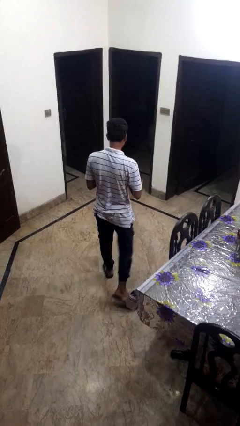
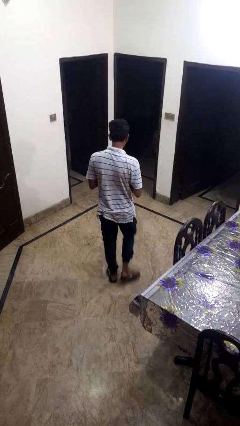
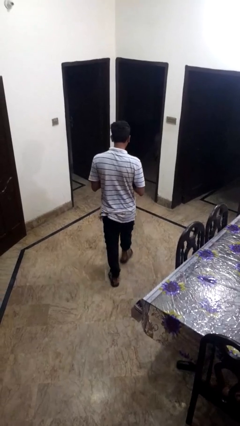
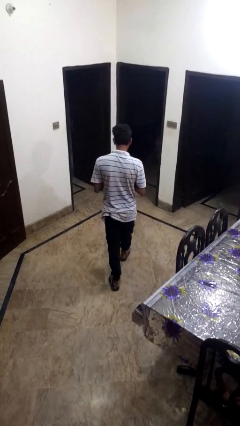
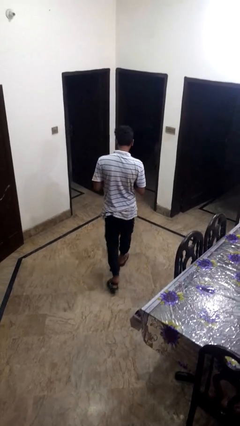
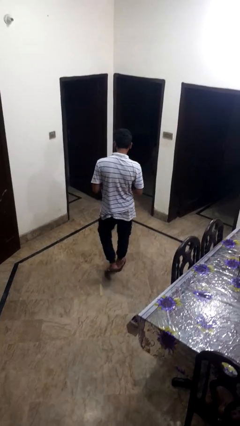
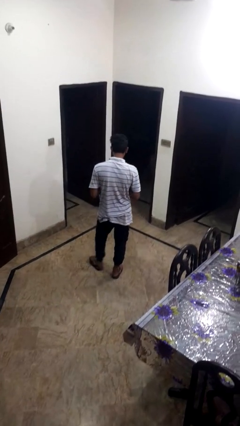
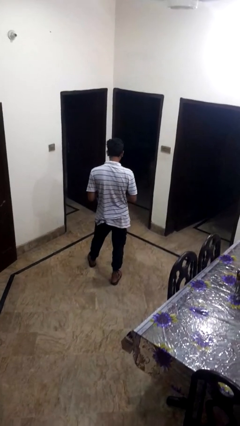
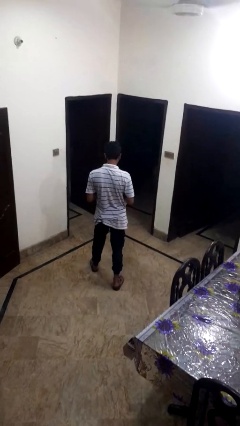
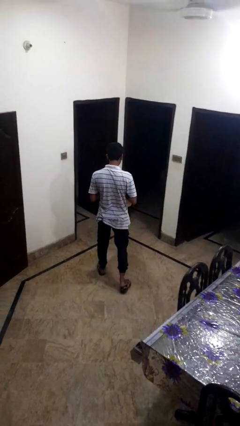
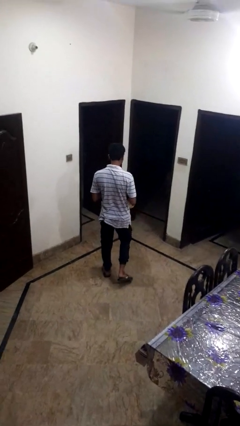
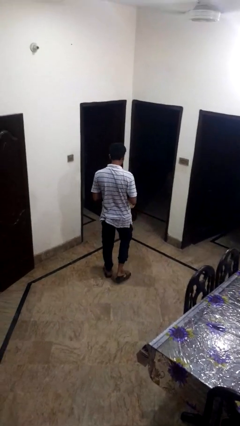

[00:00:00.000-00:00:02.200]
person carries groceries

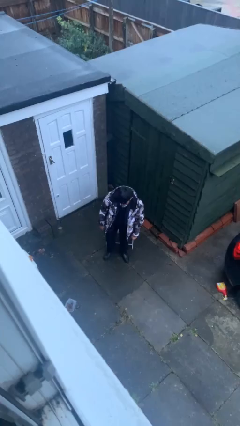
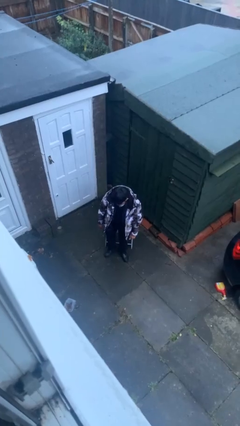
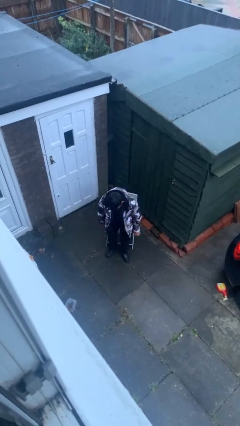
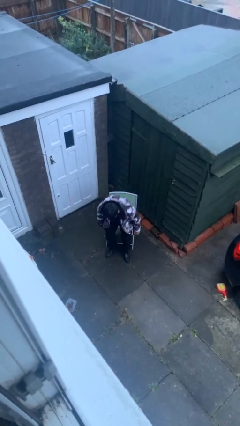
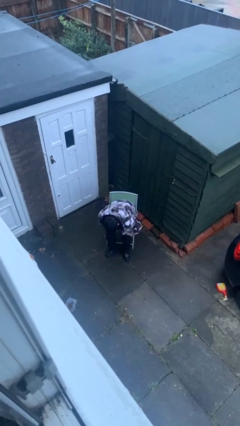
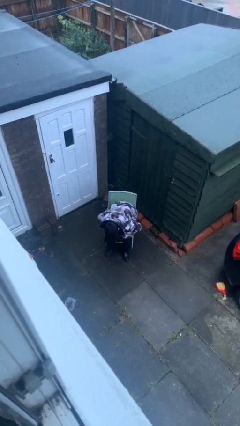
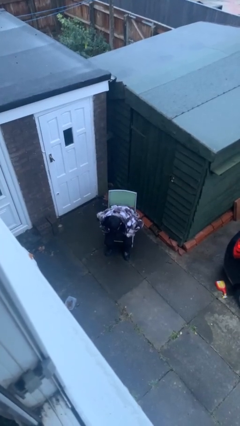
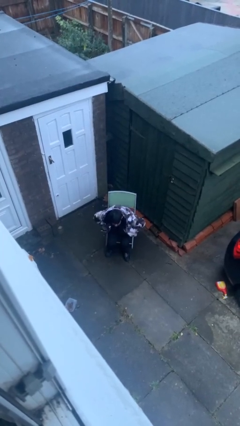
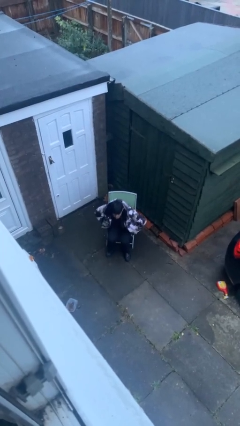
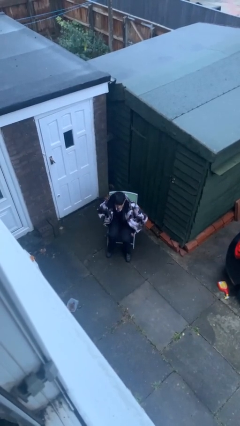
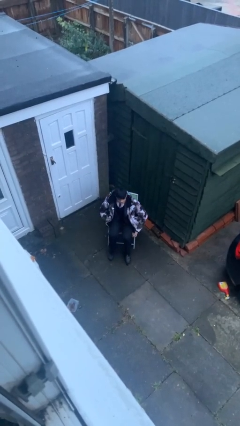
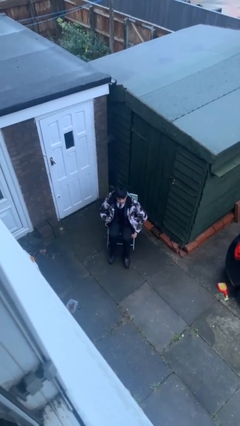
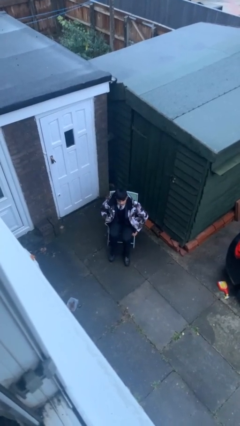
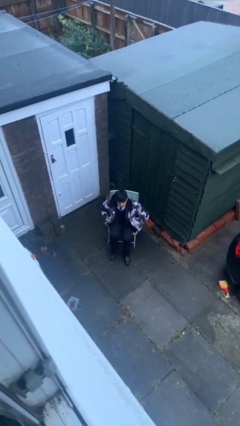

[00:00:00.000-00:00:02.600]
person sits down

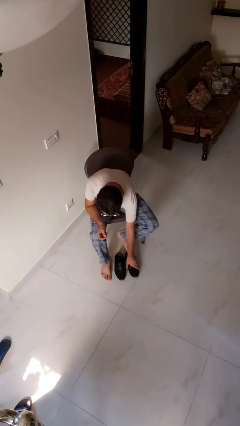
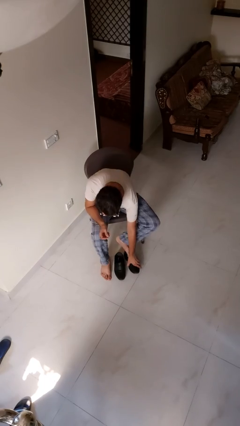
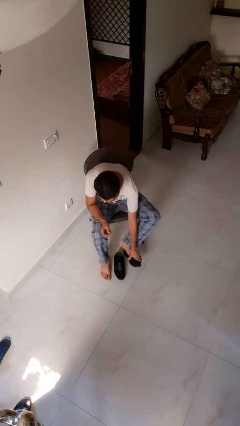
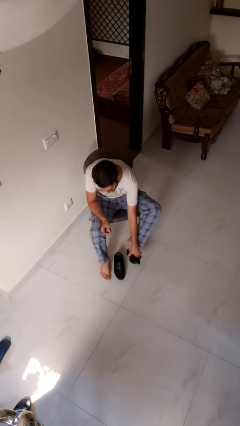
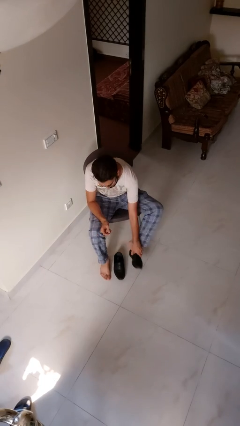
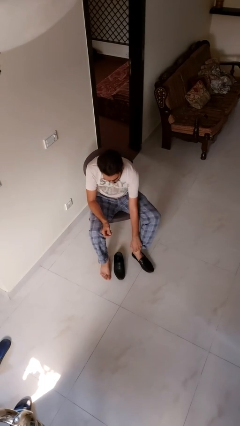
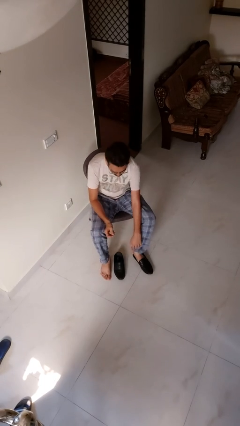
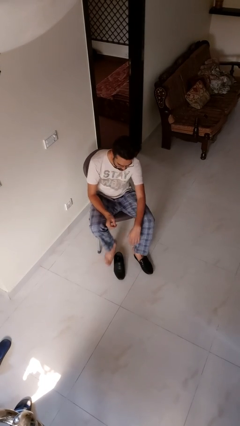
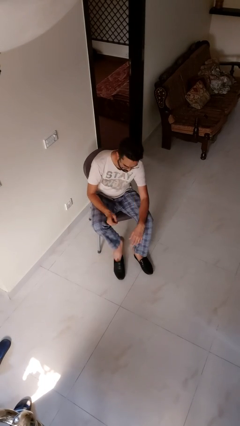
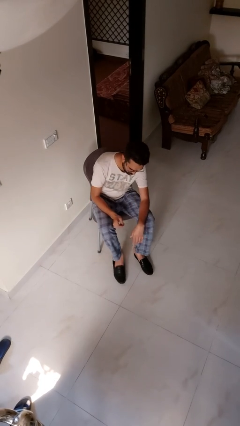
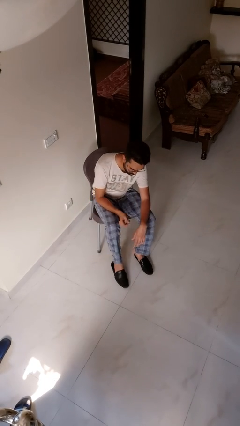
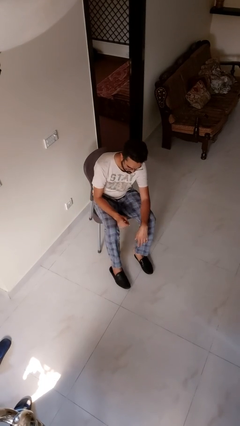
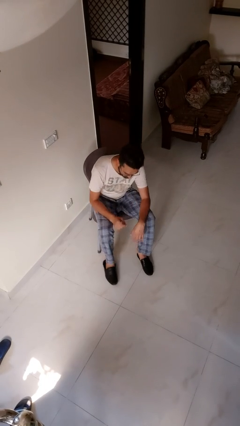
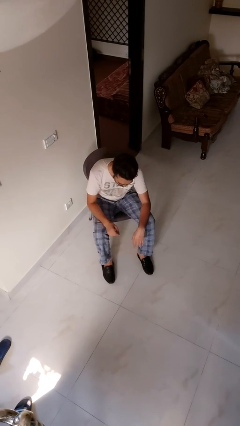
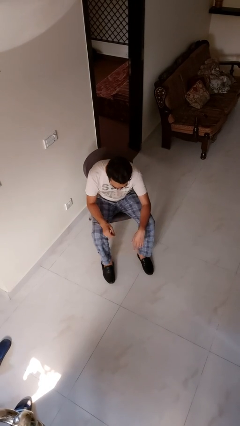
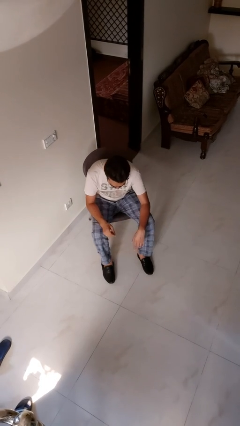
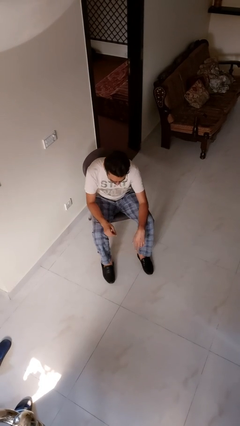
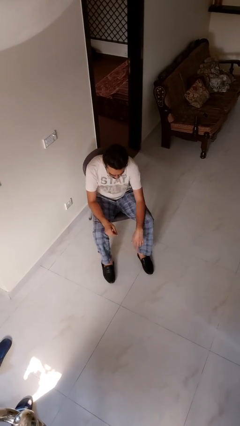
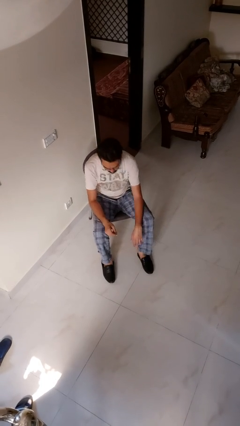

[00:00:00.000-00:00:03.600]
person puts on boots

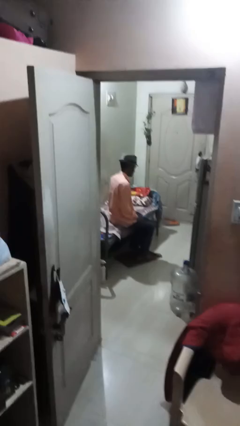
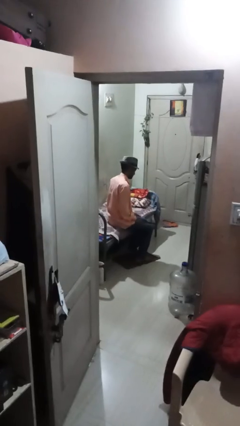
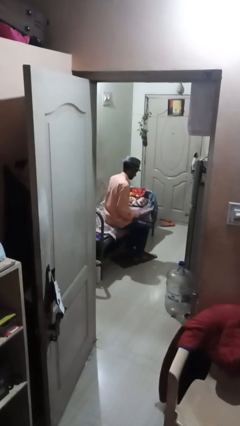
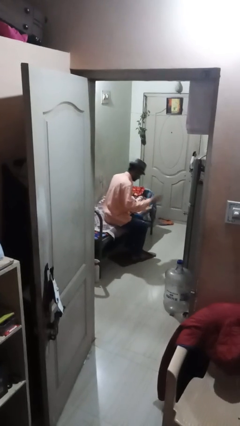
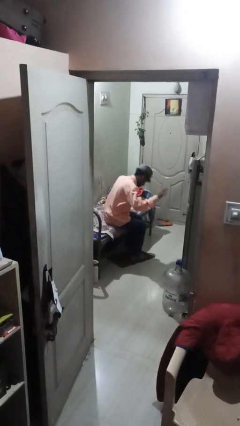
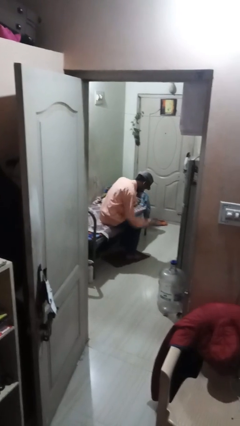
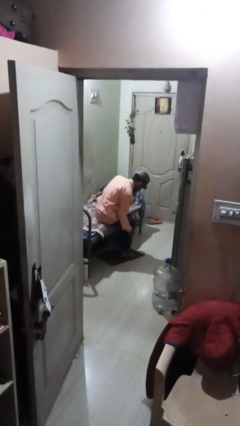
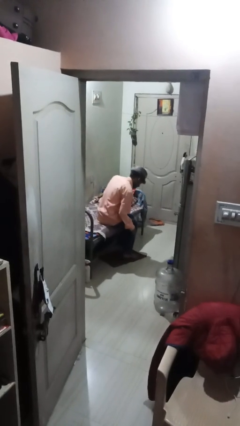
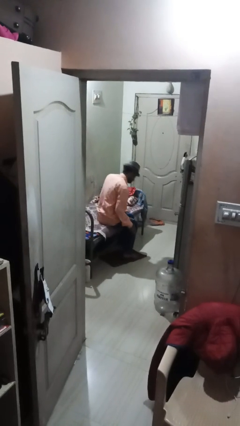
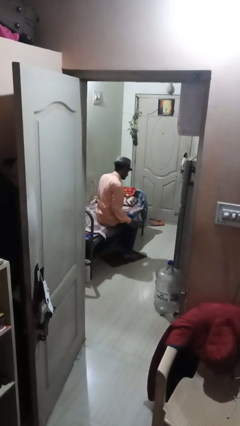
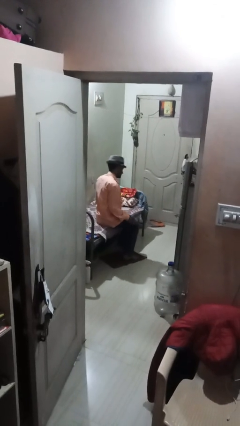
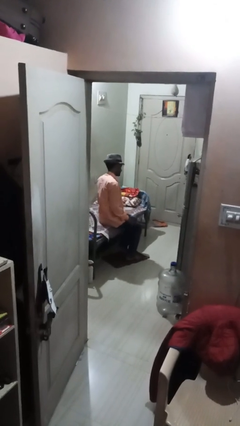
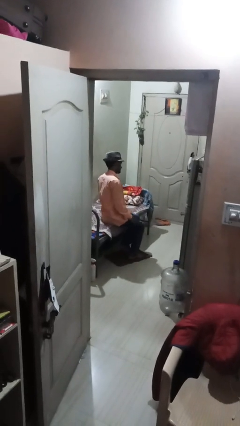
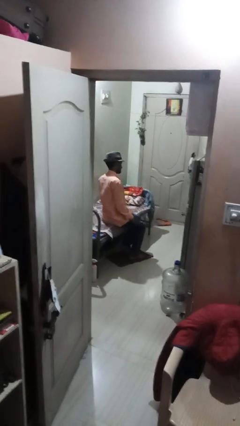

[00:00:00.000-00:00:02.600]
person swats bug

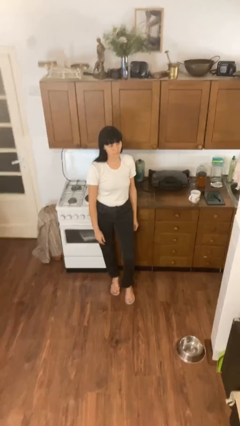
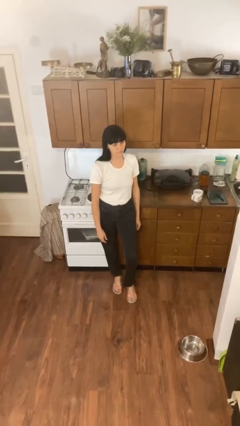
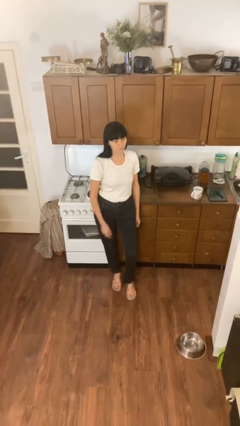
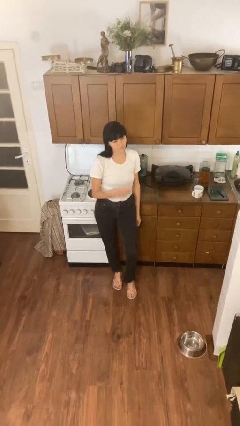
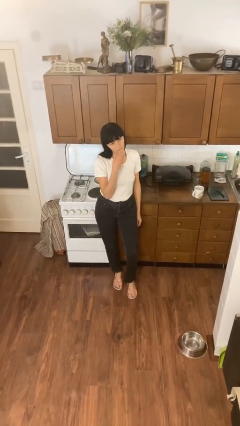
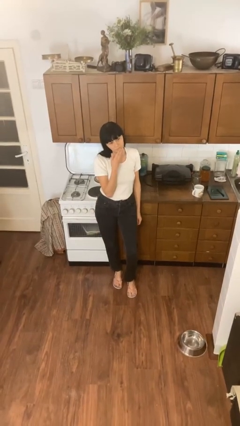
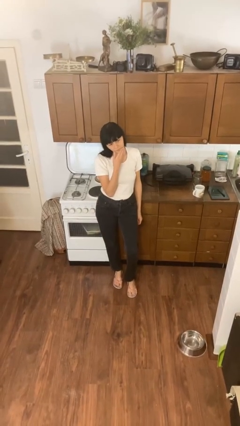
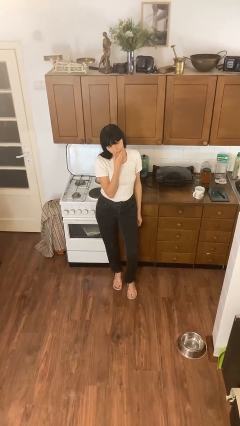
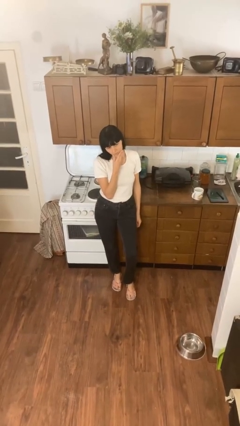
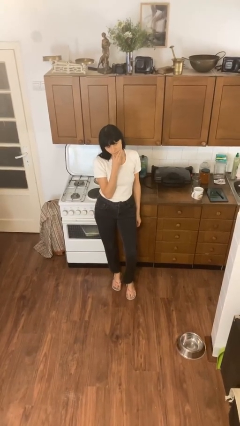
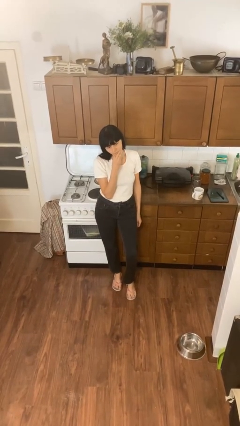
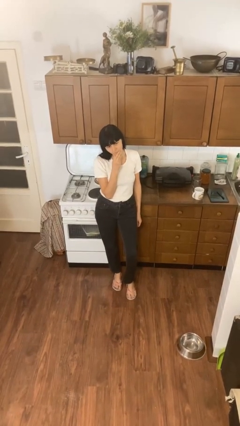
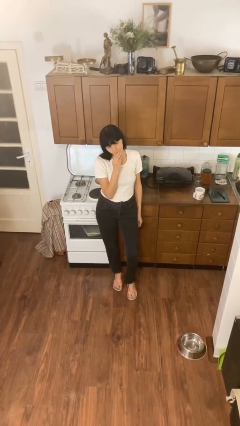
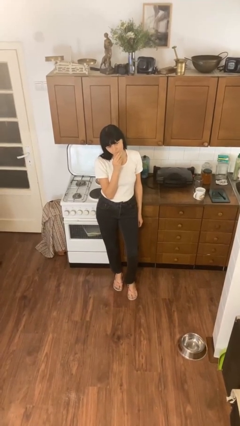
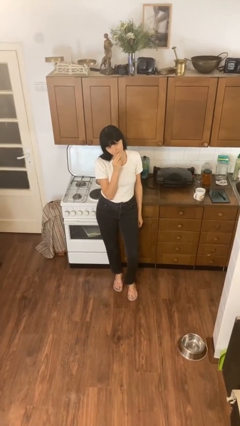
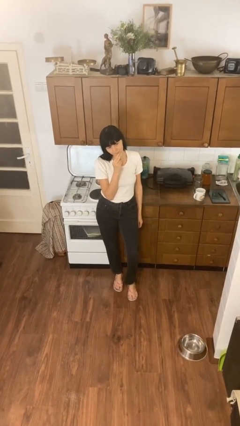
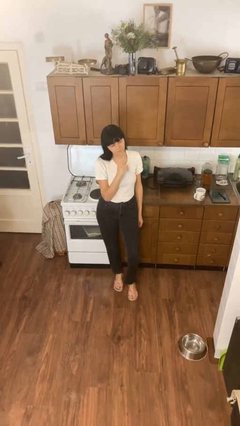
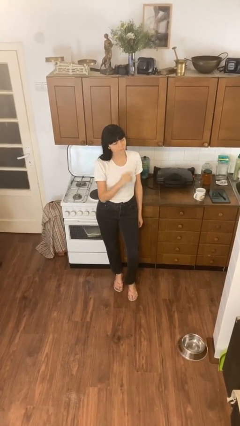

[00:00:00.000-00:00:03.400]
person strokes chin

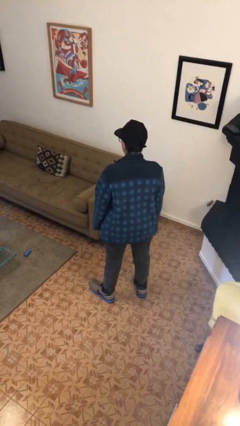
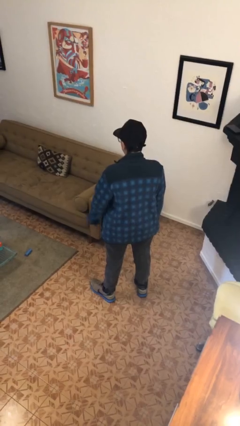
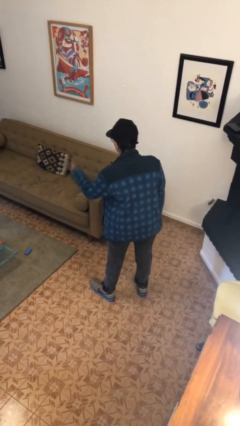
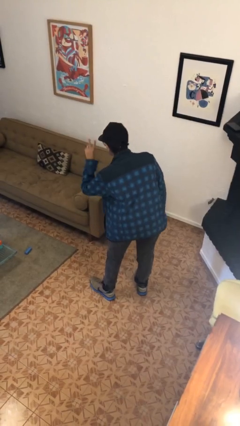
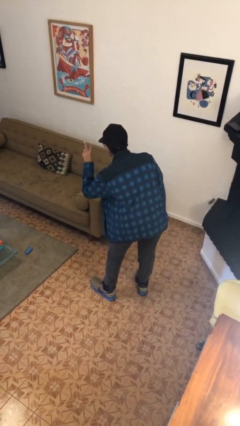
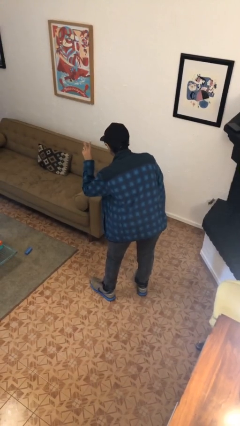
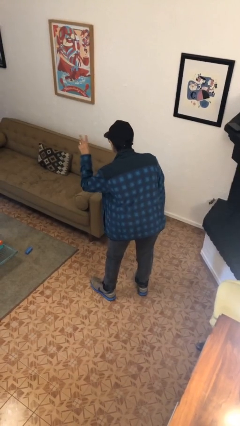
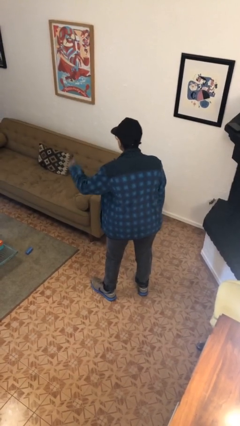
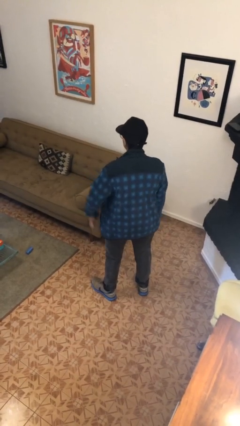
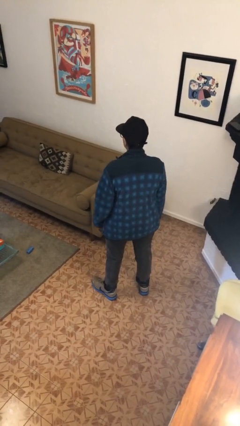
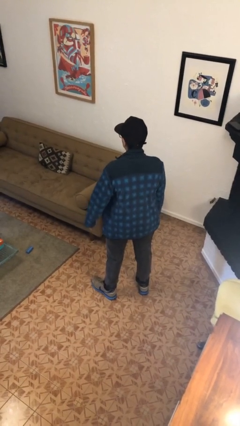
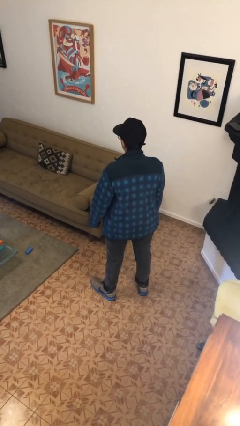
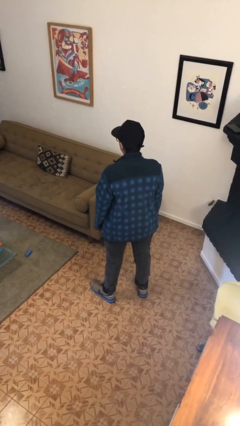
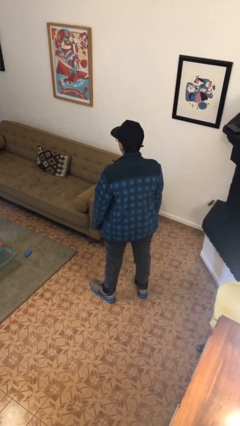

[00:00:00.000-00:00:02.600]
person gestures peace

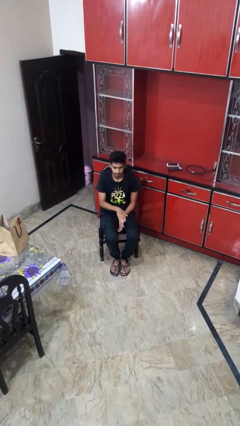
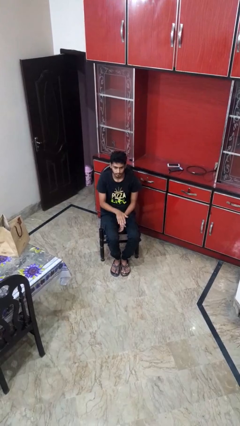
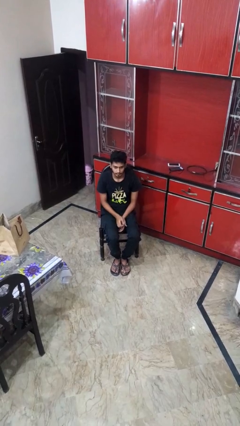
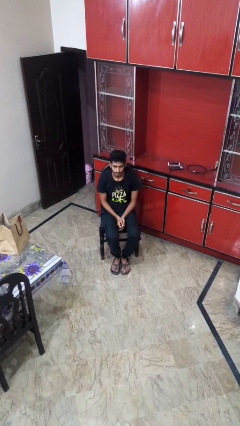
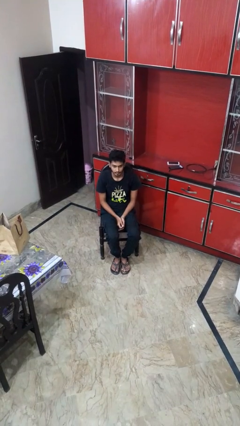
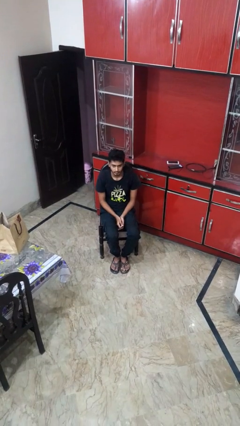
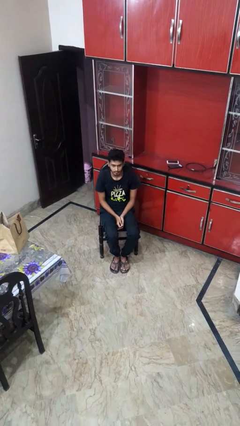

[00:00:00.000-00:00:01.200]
person gestures swipe down
